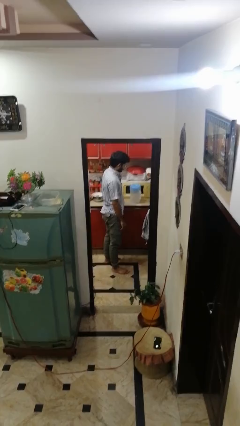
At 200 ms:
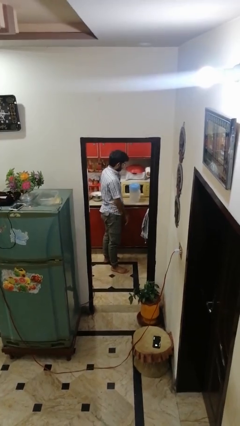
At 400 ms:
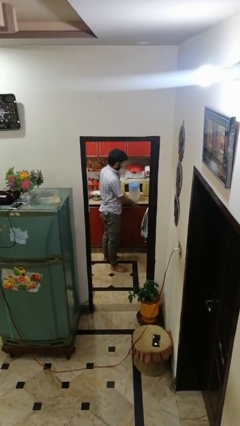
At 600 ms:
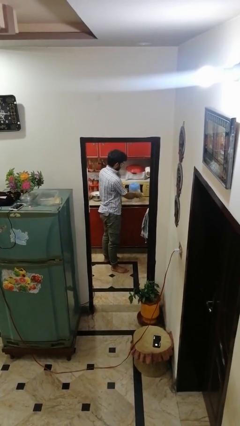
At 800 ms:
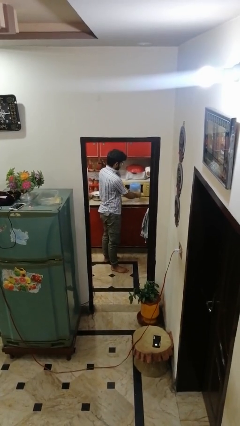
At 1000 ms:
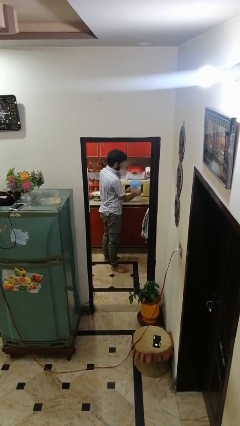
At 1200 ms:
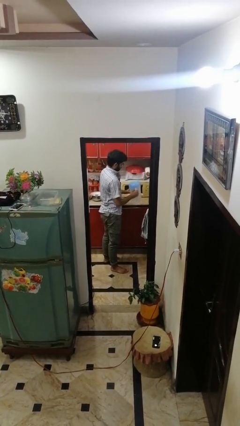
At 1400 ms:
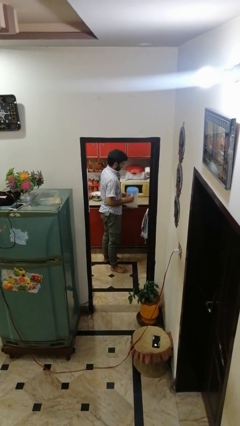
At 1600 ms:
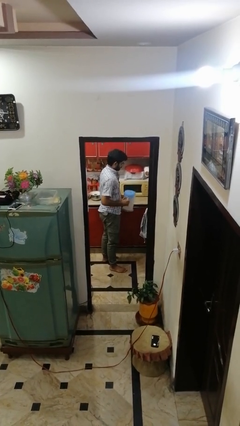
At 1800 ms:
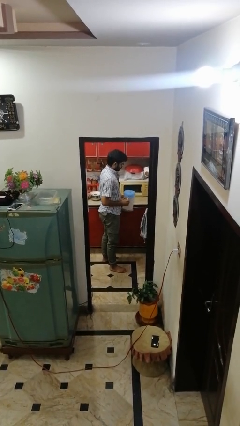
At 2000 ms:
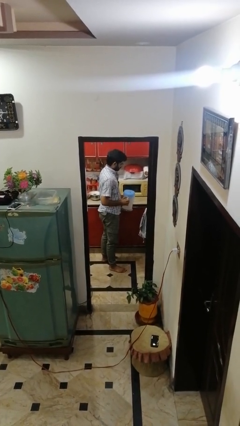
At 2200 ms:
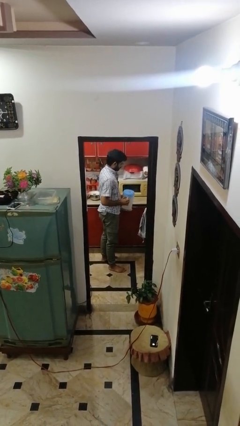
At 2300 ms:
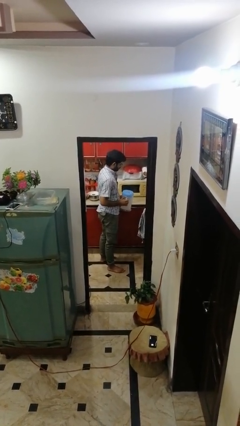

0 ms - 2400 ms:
person picks up object from countertop

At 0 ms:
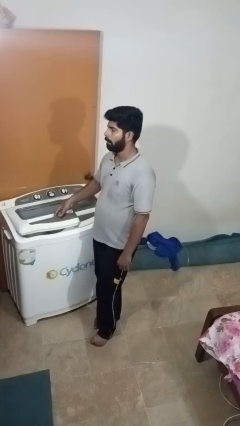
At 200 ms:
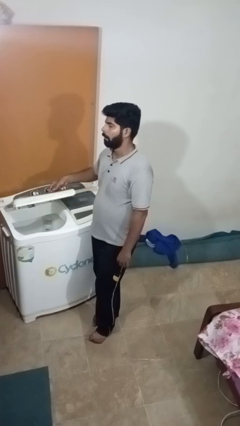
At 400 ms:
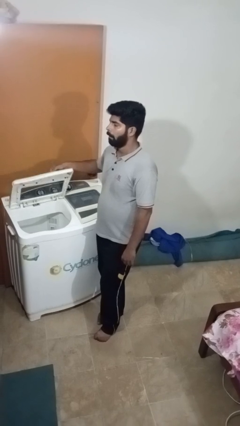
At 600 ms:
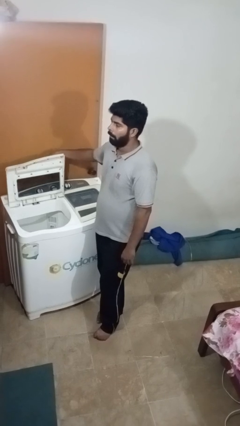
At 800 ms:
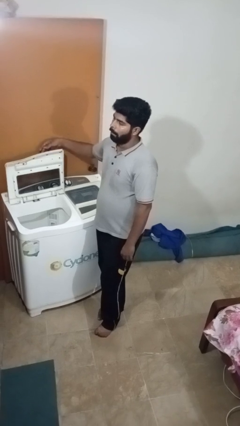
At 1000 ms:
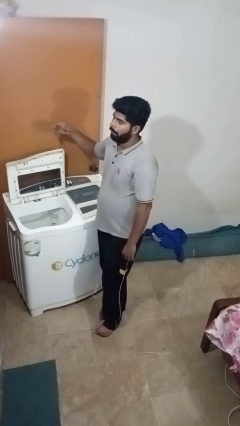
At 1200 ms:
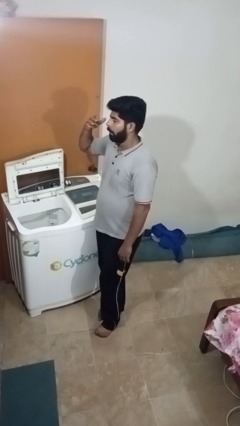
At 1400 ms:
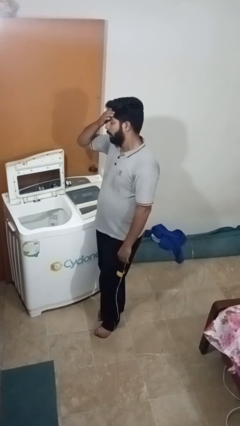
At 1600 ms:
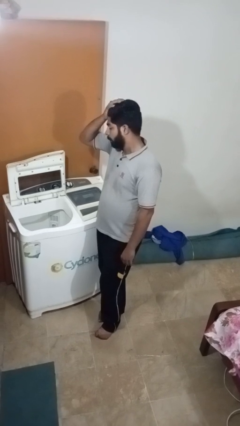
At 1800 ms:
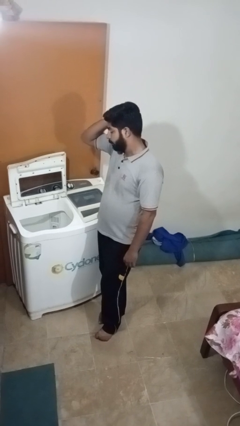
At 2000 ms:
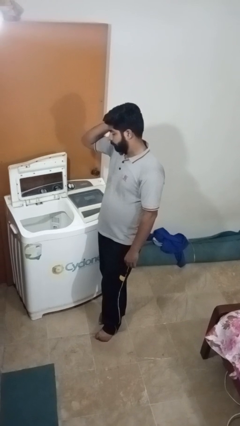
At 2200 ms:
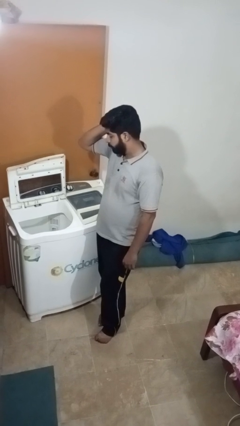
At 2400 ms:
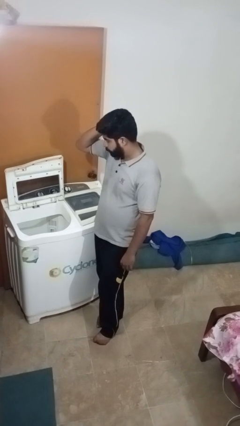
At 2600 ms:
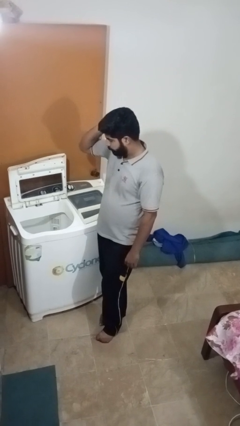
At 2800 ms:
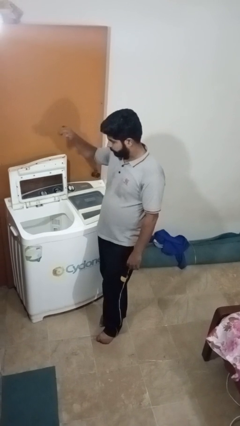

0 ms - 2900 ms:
person opens clothes washer

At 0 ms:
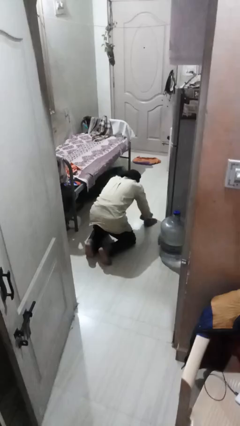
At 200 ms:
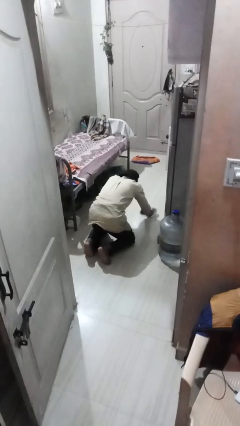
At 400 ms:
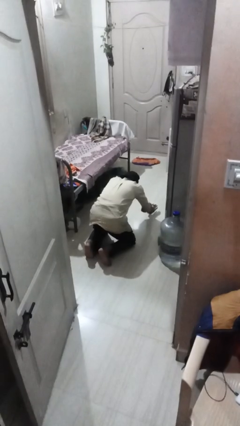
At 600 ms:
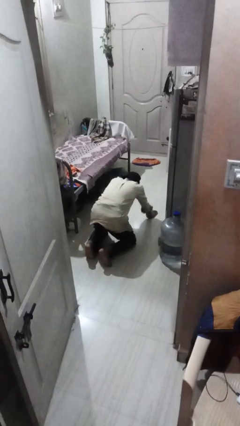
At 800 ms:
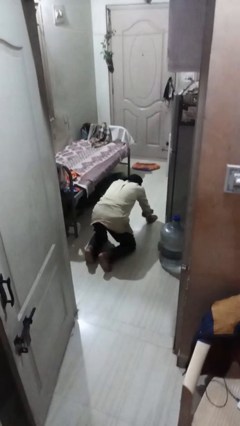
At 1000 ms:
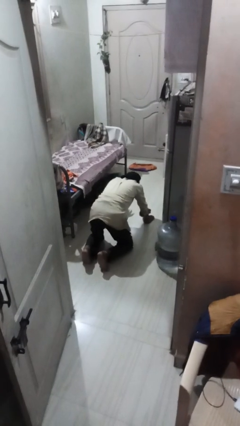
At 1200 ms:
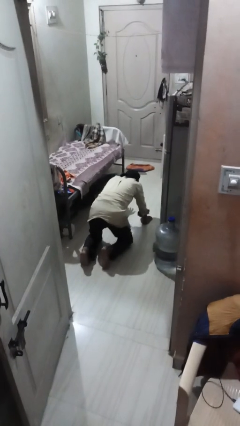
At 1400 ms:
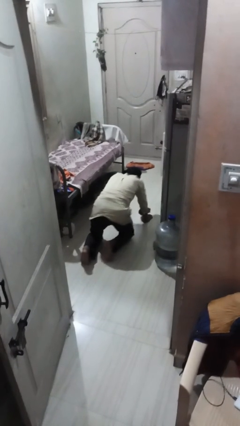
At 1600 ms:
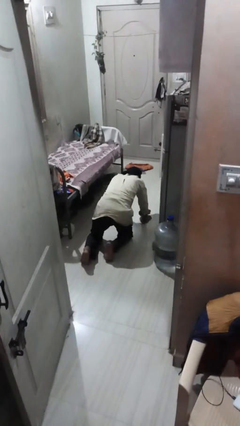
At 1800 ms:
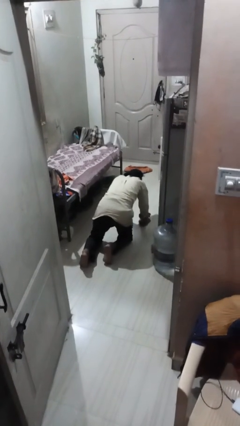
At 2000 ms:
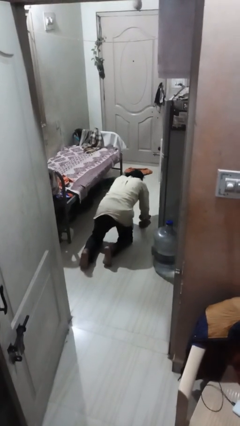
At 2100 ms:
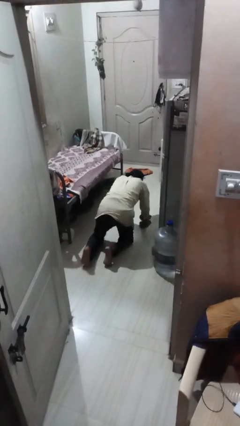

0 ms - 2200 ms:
person crawls

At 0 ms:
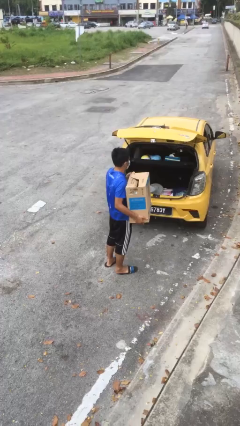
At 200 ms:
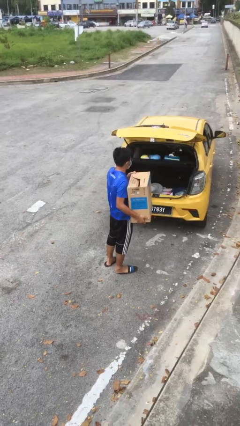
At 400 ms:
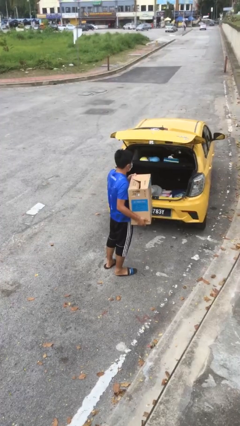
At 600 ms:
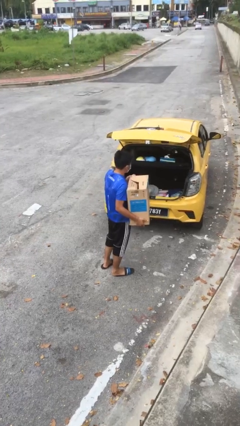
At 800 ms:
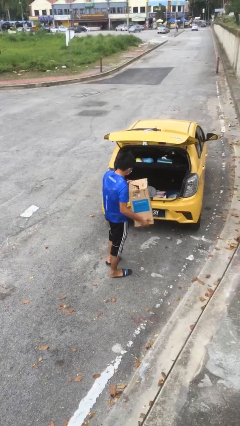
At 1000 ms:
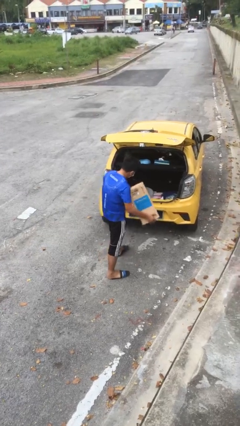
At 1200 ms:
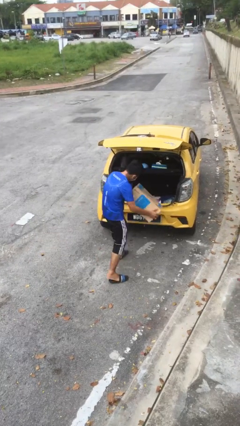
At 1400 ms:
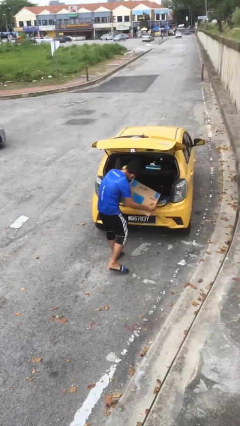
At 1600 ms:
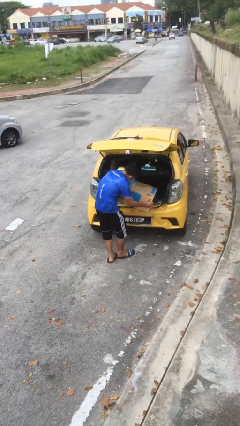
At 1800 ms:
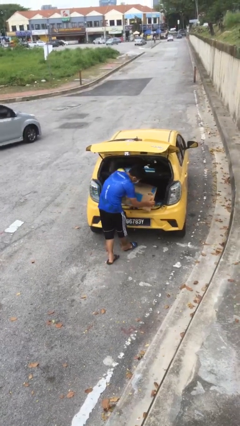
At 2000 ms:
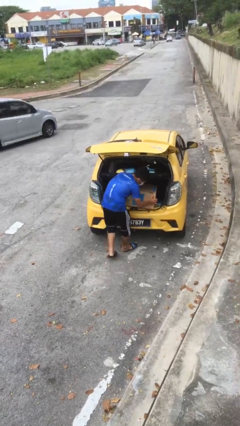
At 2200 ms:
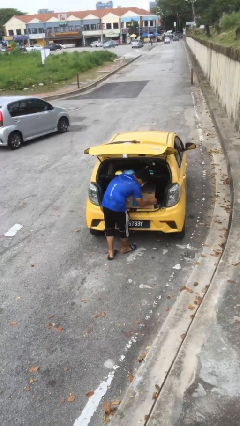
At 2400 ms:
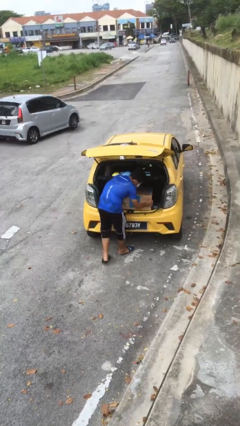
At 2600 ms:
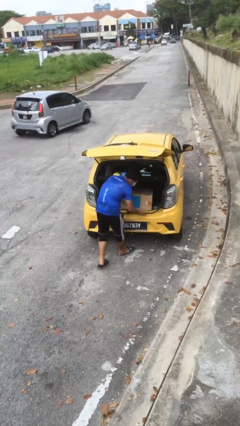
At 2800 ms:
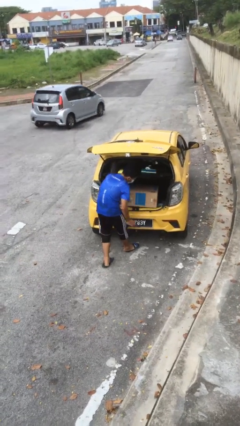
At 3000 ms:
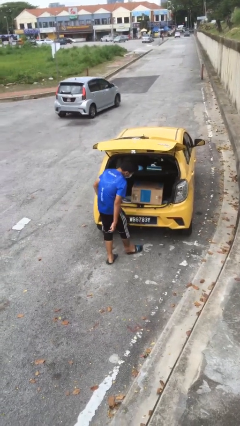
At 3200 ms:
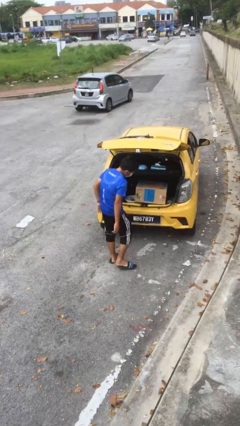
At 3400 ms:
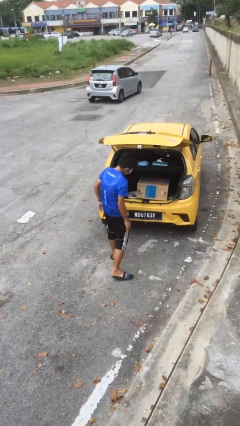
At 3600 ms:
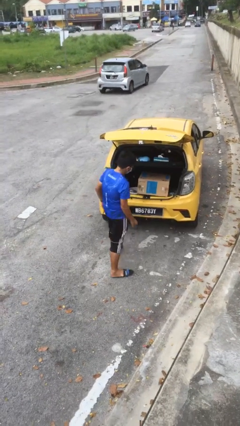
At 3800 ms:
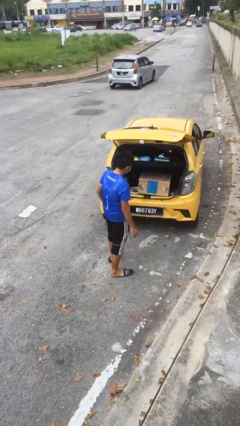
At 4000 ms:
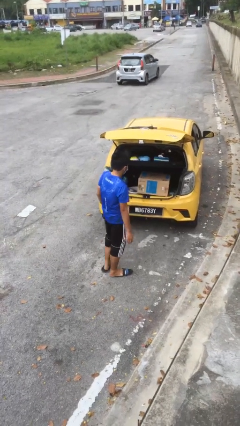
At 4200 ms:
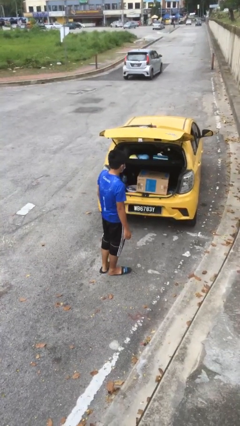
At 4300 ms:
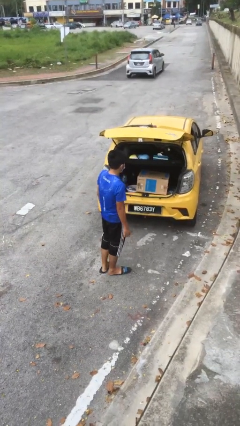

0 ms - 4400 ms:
person loads car

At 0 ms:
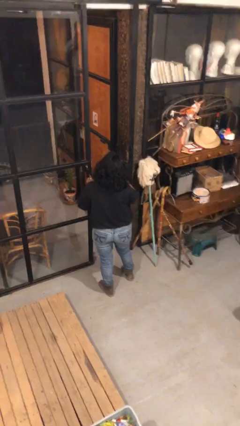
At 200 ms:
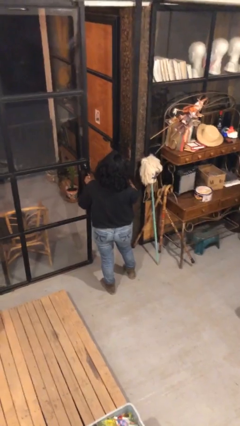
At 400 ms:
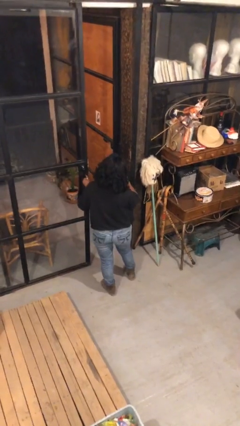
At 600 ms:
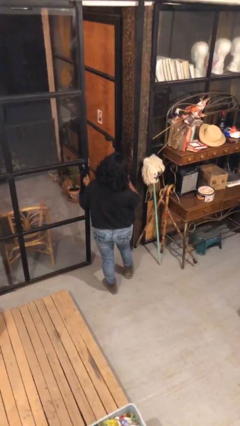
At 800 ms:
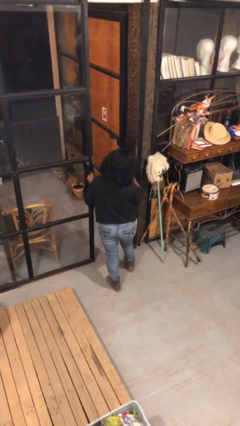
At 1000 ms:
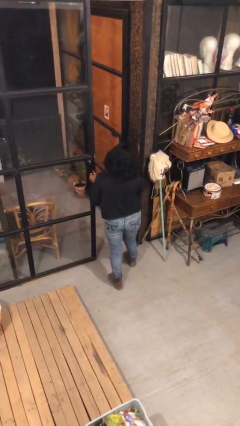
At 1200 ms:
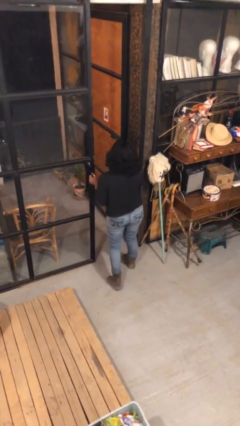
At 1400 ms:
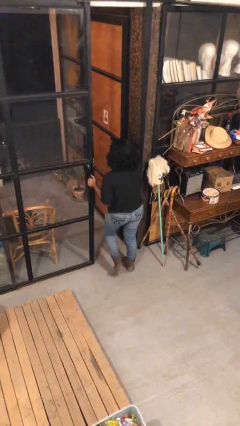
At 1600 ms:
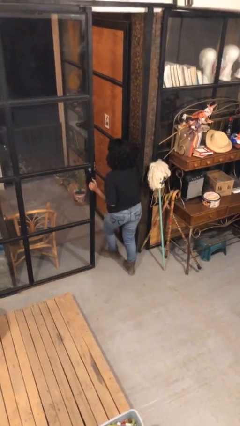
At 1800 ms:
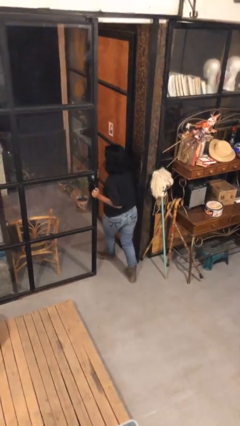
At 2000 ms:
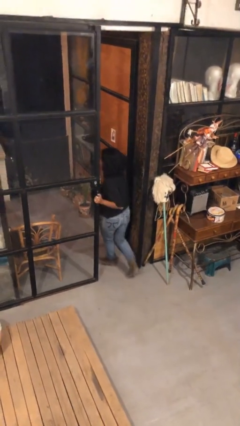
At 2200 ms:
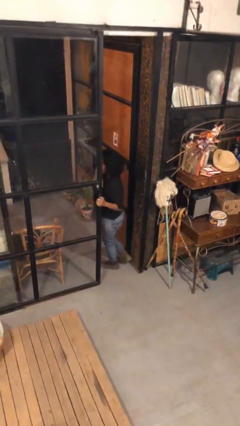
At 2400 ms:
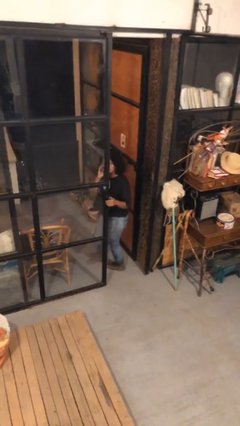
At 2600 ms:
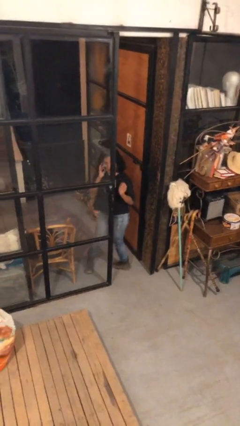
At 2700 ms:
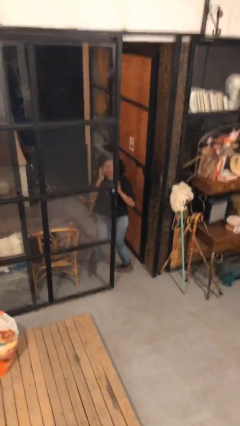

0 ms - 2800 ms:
person exits scene through structure

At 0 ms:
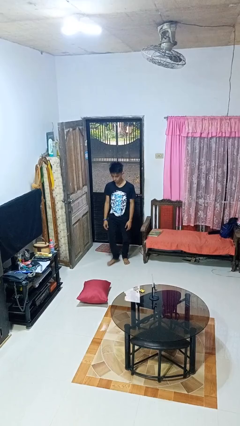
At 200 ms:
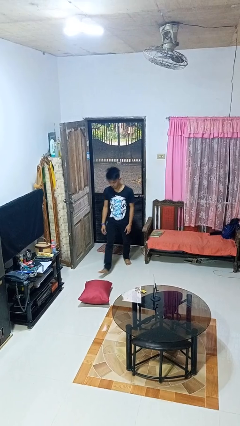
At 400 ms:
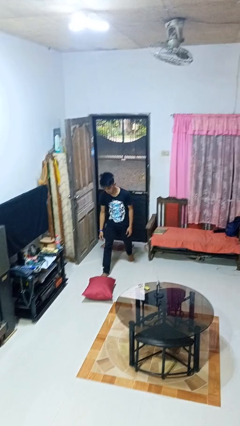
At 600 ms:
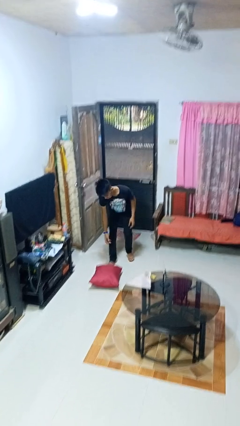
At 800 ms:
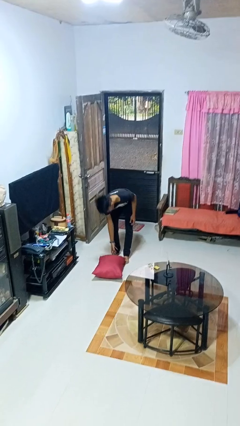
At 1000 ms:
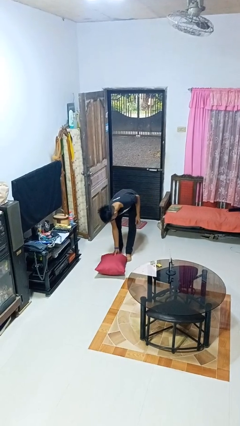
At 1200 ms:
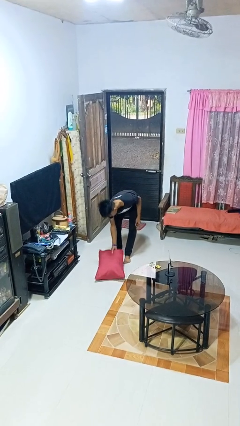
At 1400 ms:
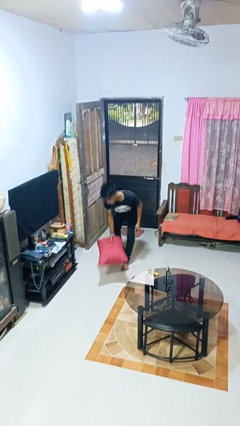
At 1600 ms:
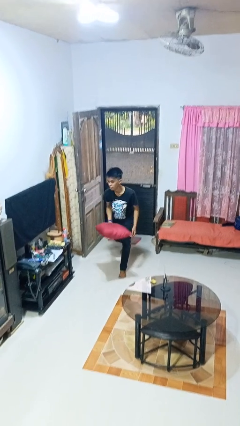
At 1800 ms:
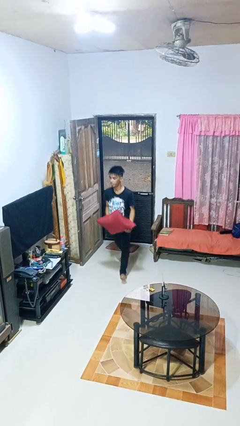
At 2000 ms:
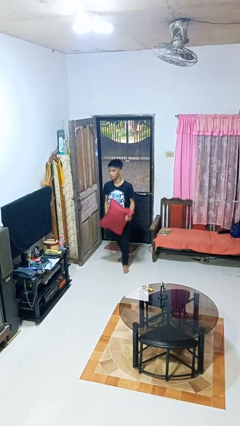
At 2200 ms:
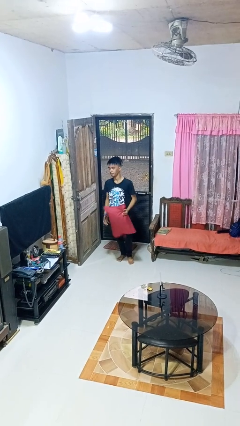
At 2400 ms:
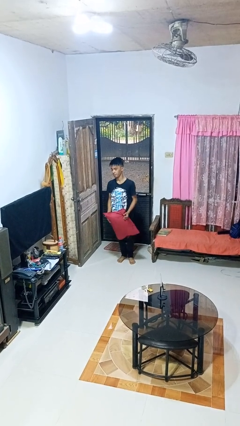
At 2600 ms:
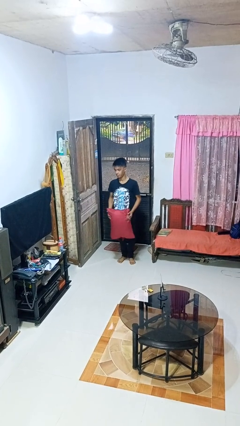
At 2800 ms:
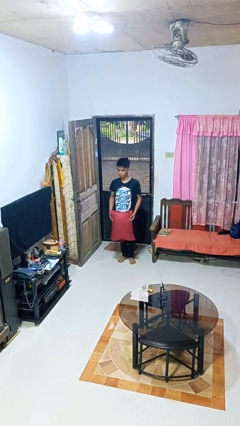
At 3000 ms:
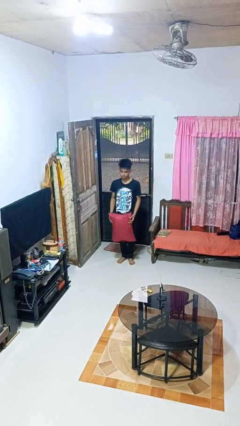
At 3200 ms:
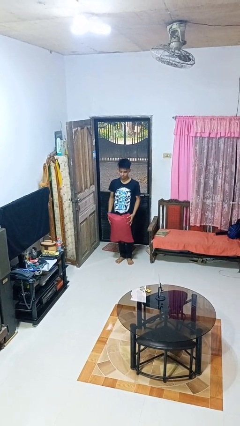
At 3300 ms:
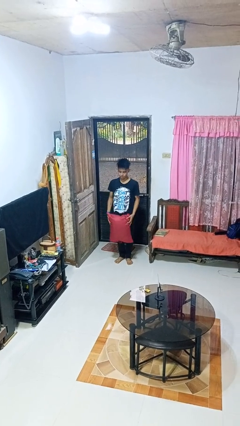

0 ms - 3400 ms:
person picks up object from floor
